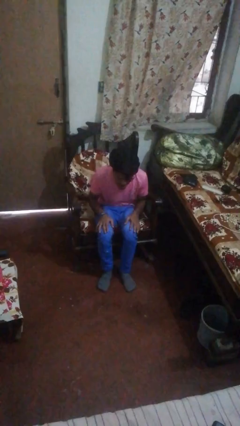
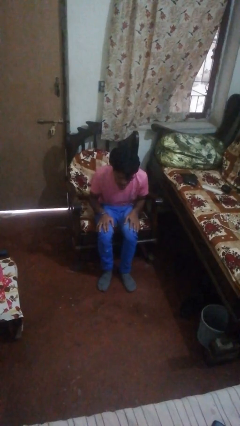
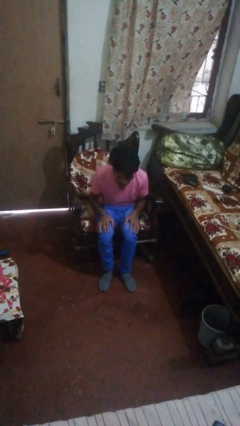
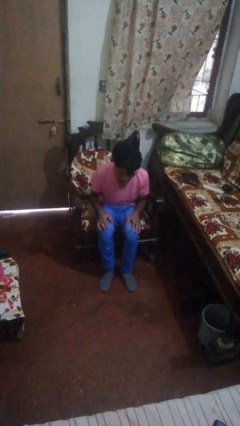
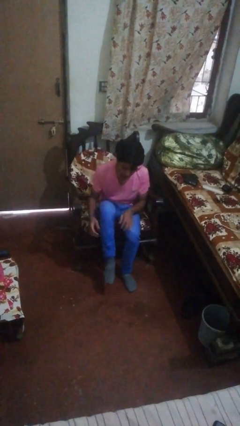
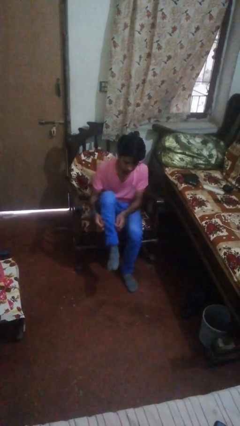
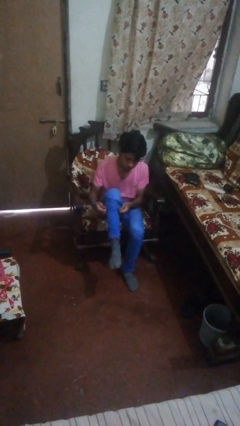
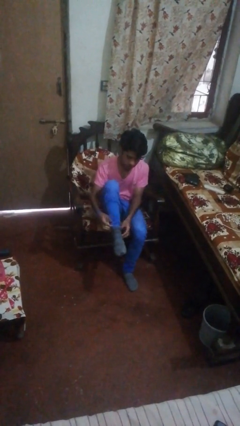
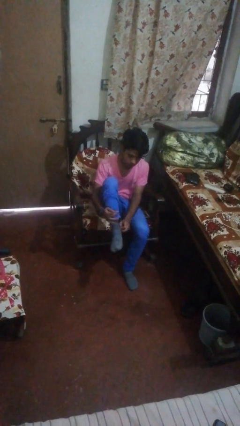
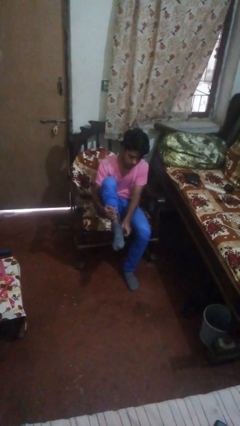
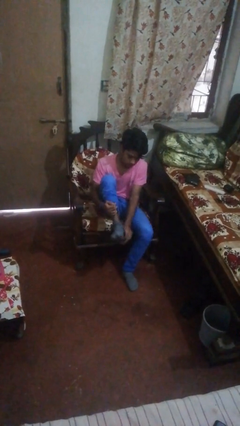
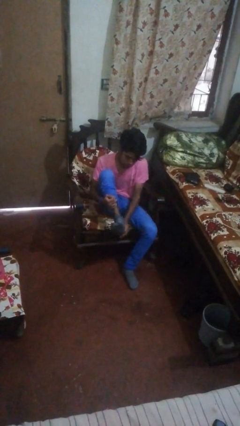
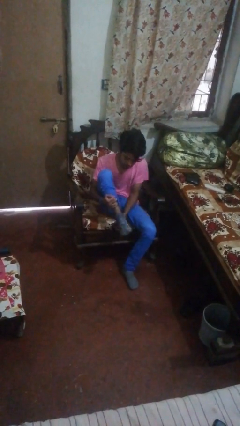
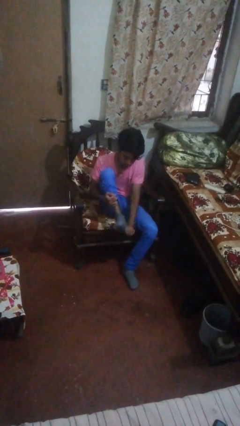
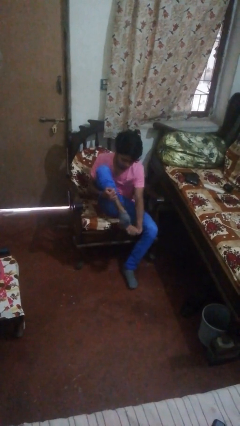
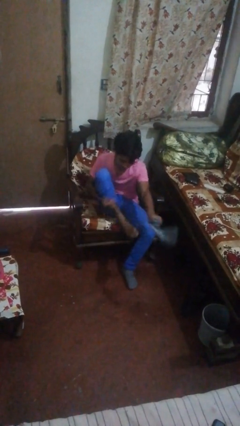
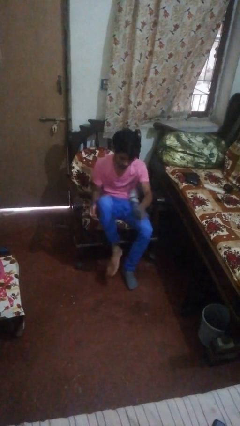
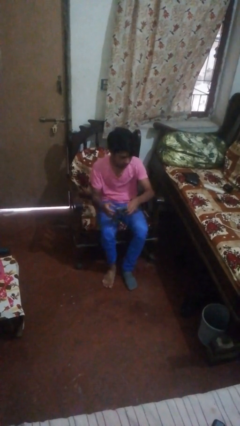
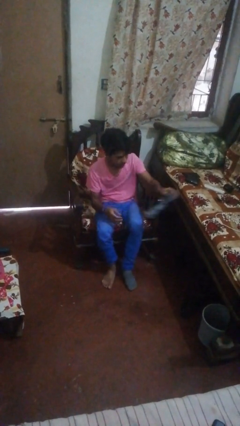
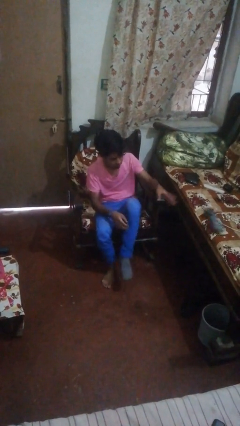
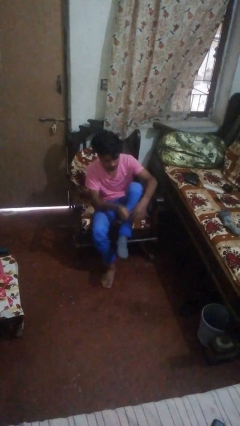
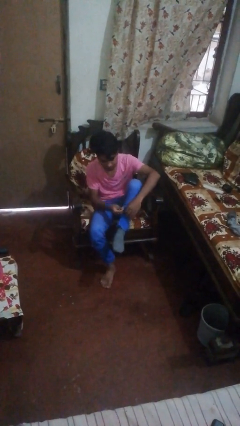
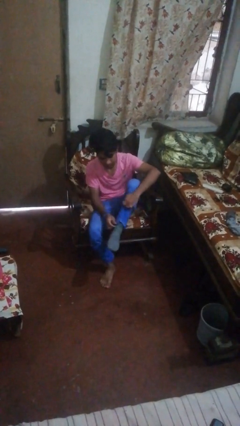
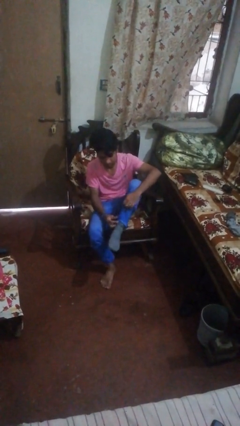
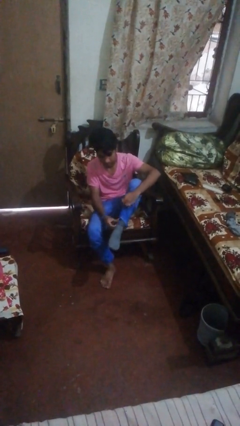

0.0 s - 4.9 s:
person takes off socks

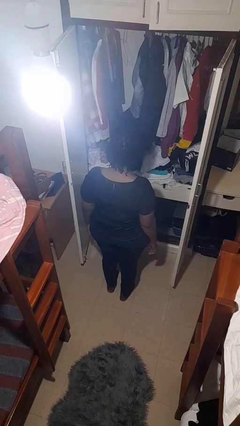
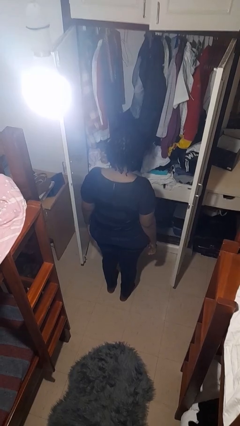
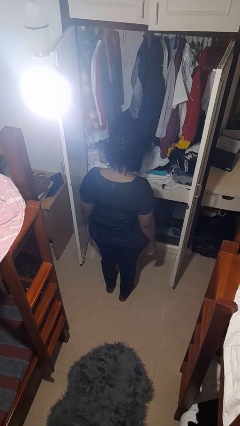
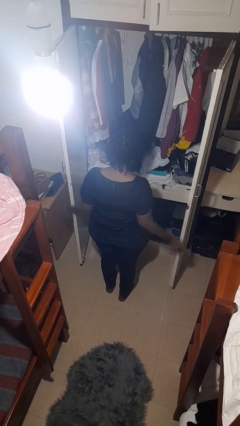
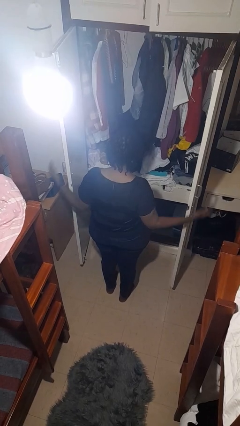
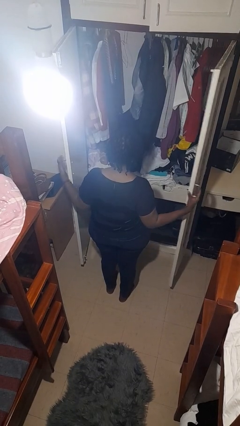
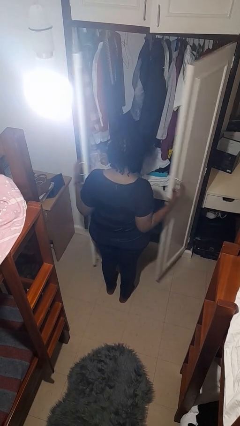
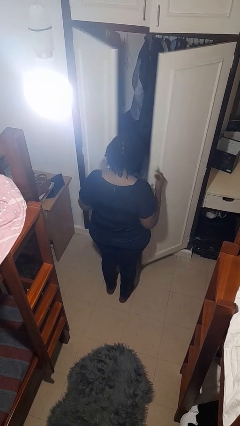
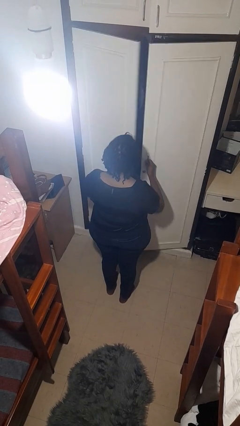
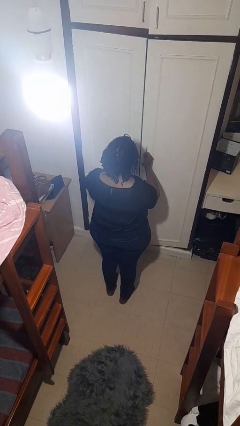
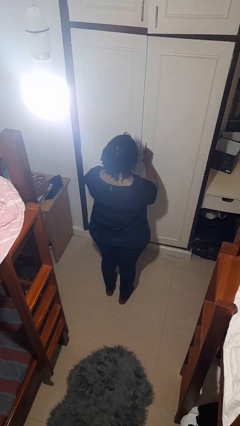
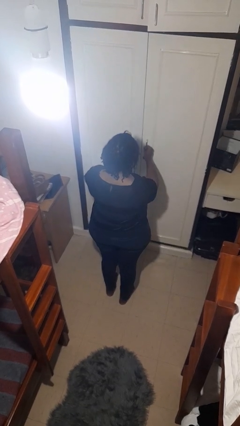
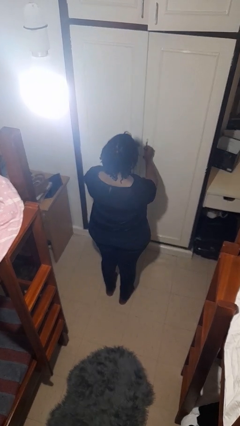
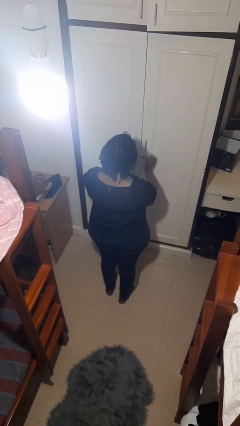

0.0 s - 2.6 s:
person closes closet door

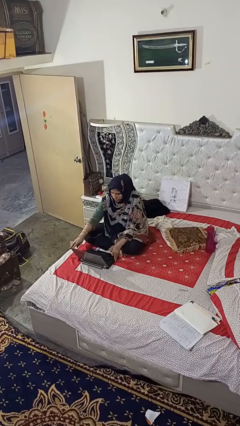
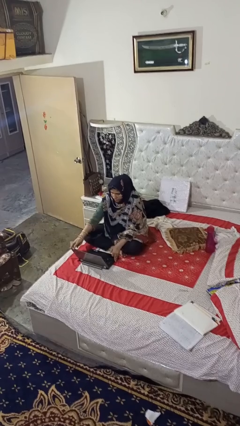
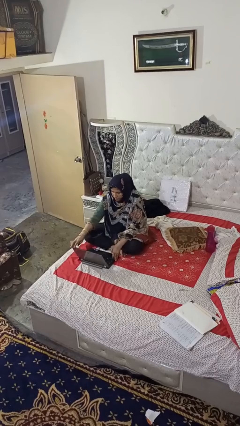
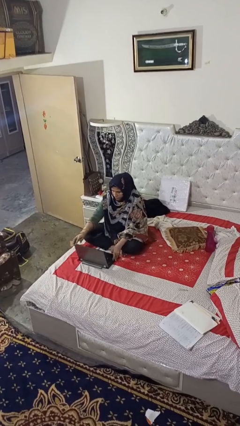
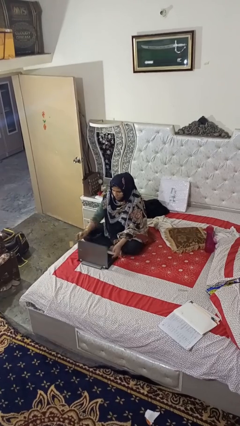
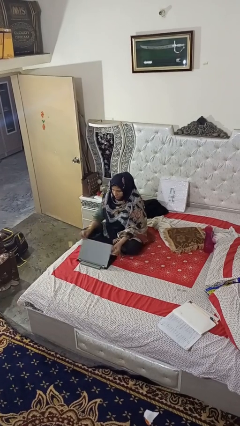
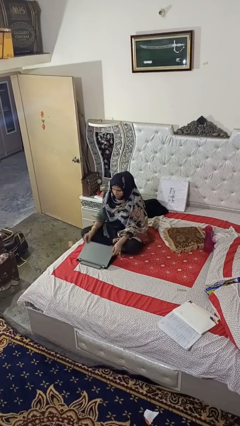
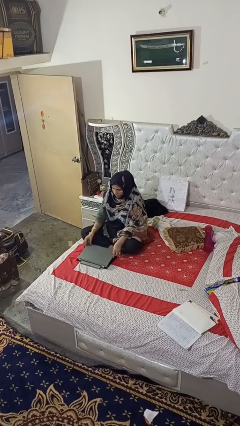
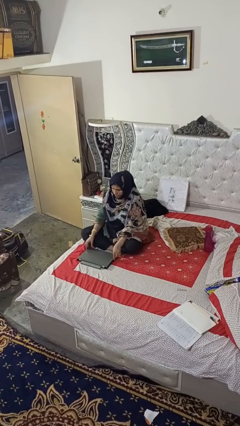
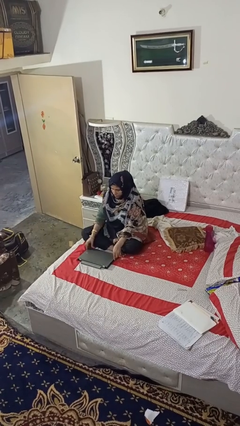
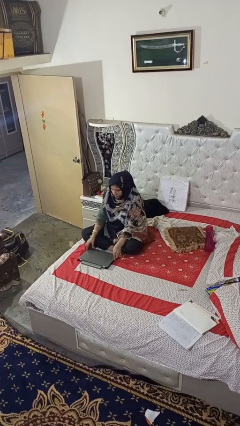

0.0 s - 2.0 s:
person closes laptop

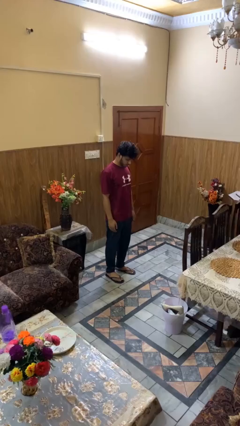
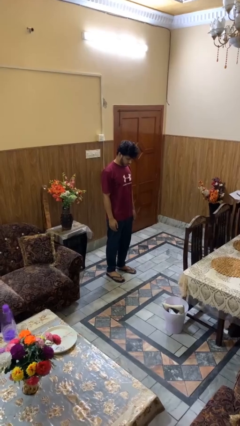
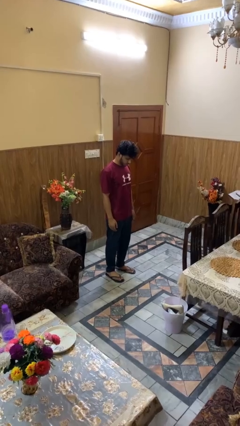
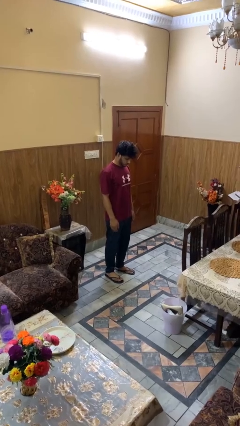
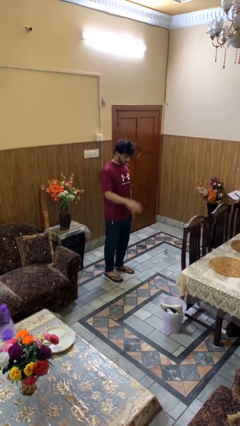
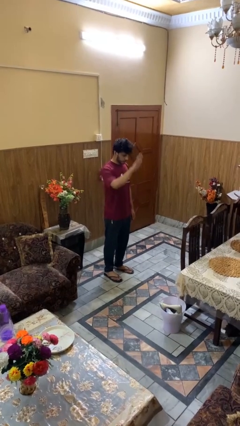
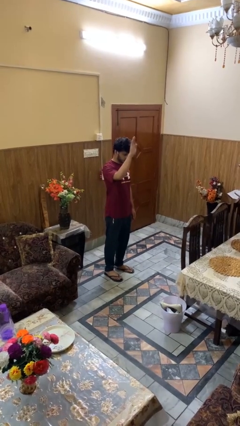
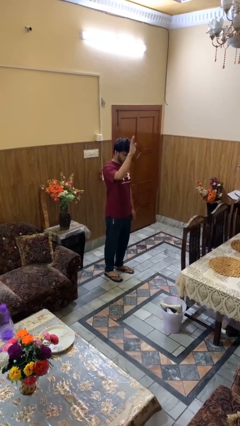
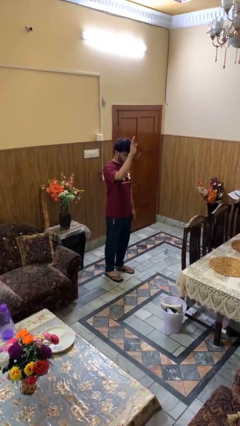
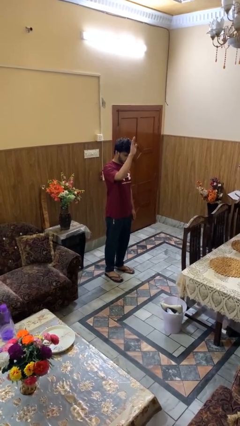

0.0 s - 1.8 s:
person gestures raise hand

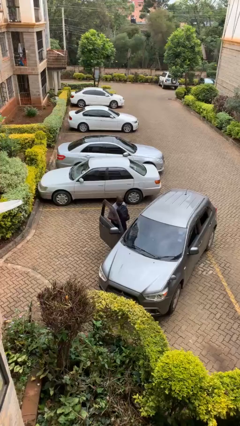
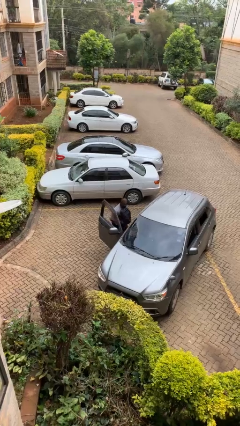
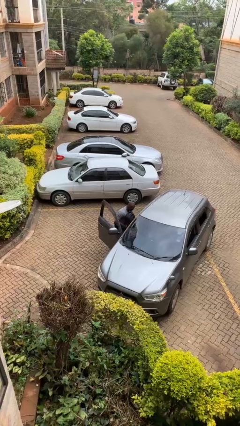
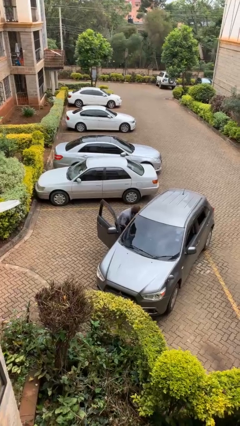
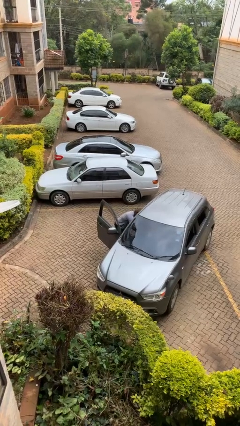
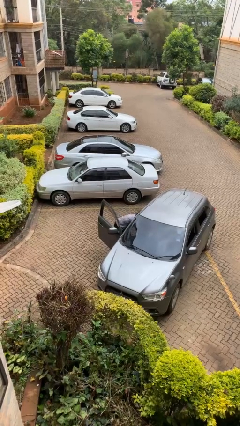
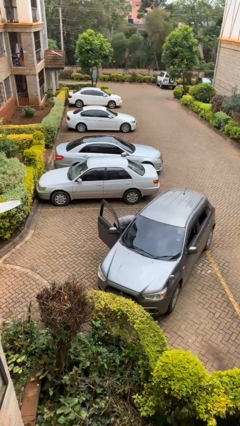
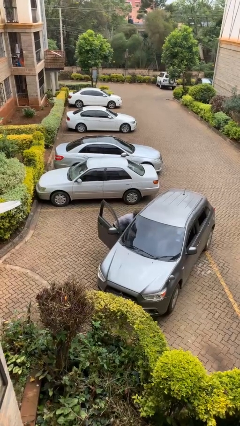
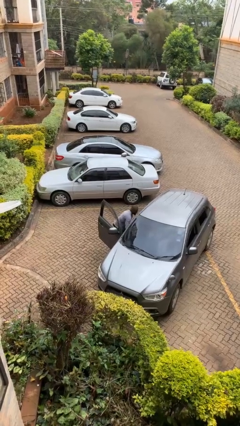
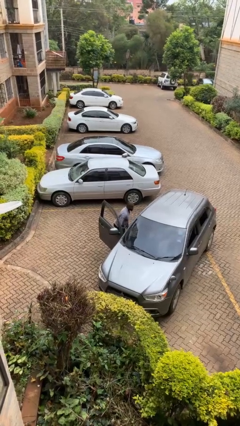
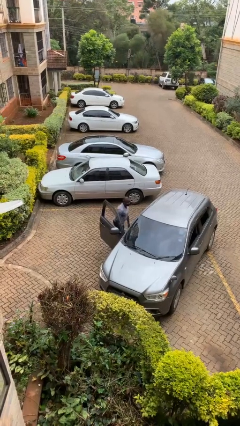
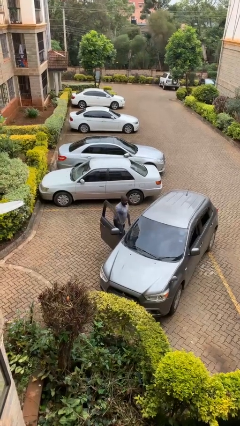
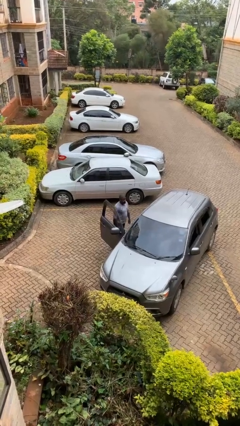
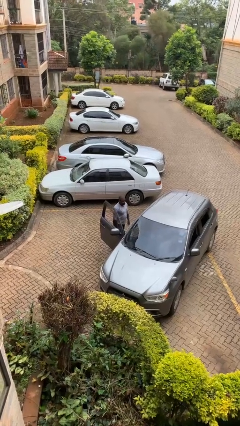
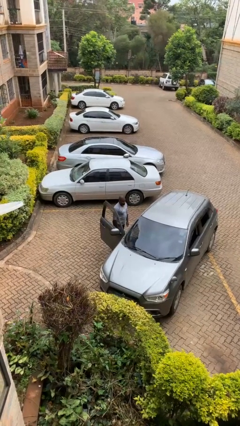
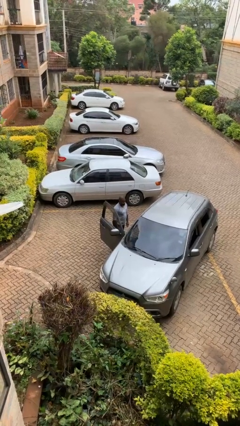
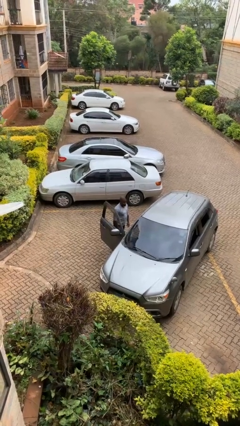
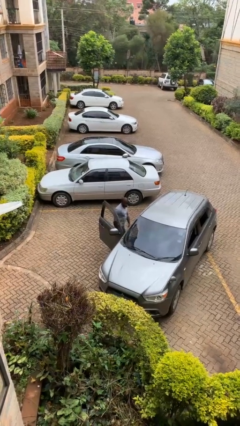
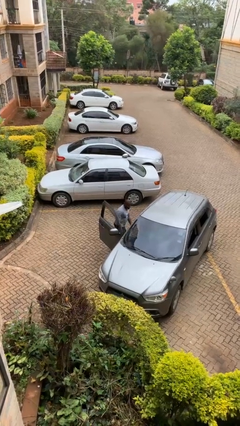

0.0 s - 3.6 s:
person loads car

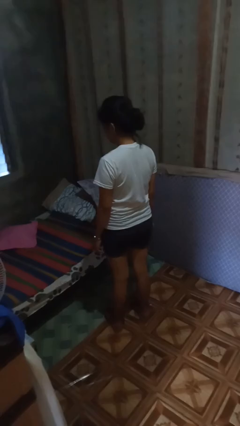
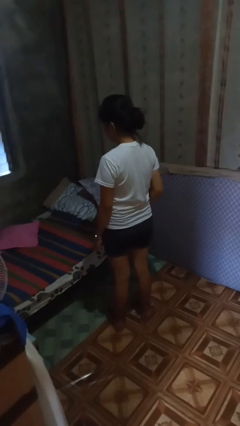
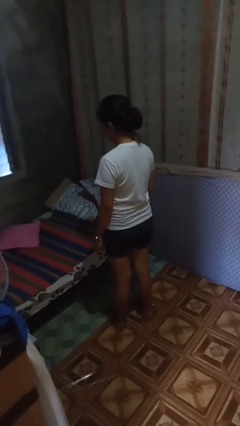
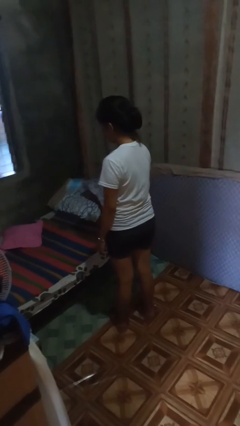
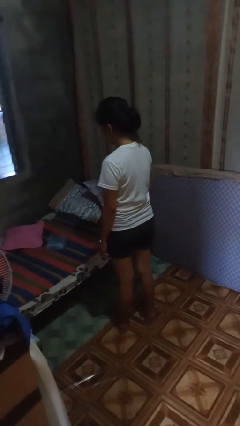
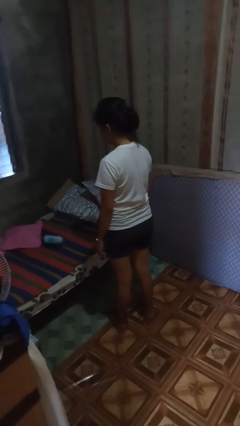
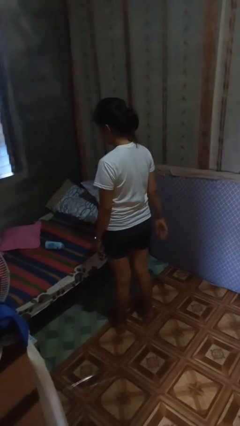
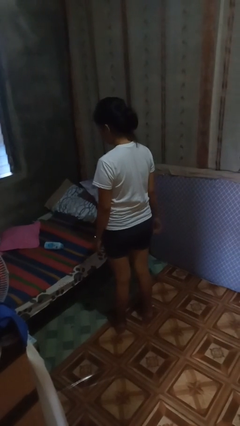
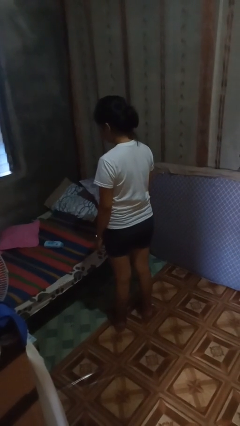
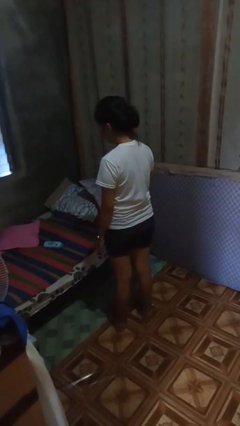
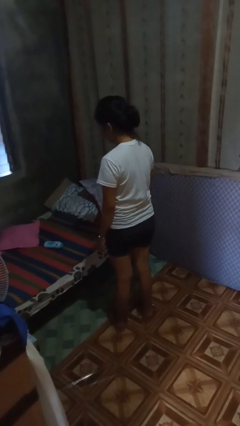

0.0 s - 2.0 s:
person throws object on bed

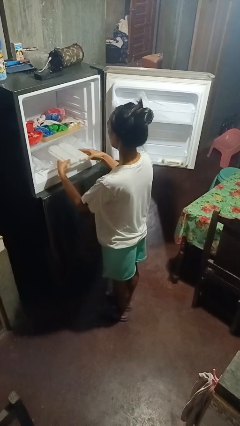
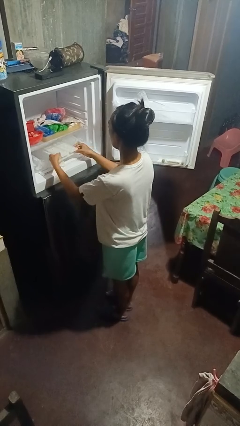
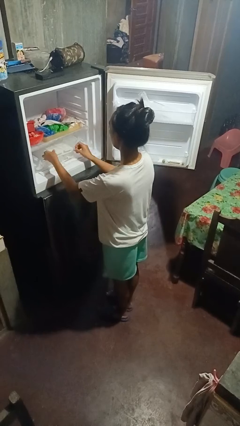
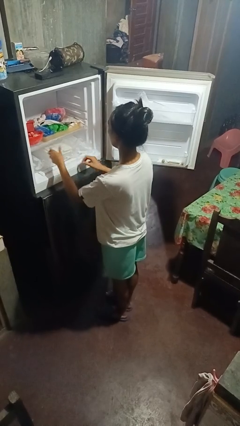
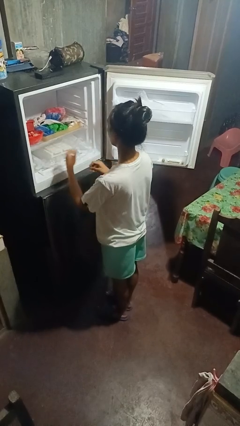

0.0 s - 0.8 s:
person puts object into refrigerator
